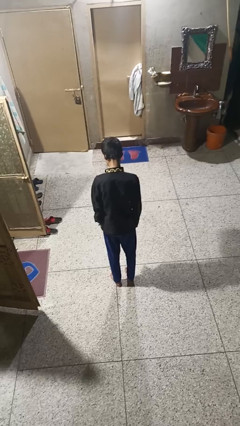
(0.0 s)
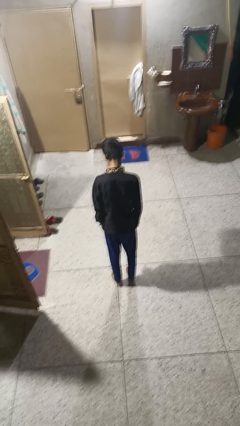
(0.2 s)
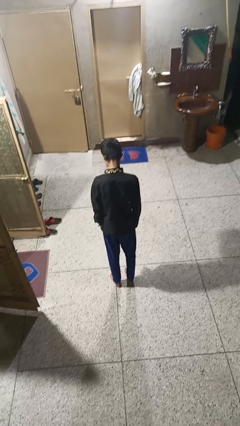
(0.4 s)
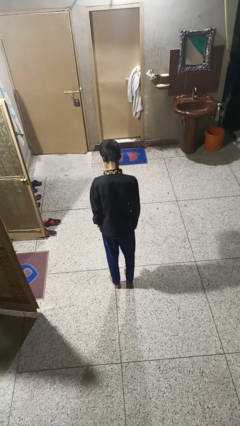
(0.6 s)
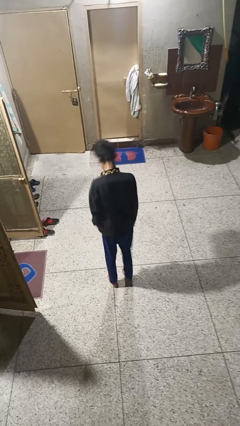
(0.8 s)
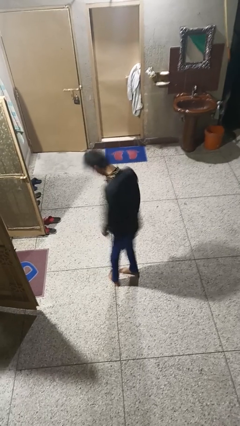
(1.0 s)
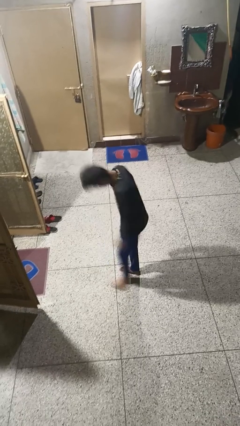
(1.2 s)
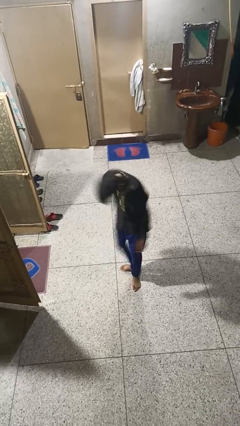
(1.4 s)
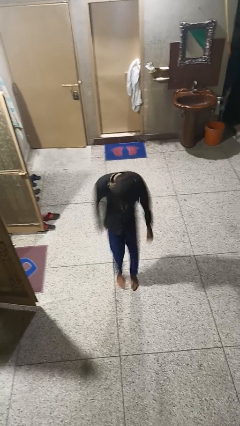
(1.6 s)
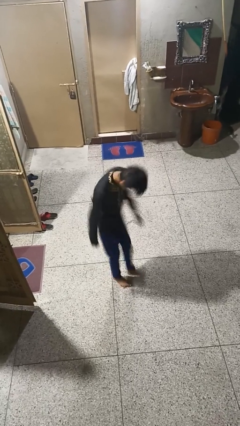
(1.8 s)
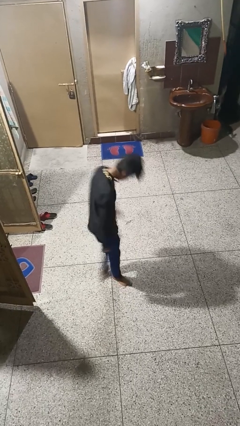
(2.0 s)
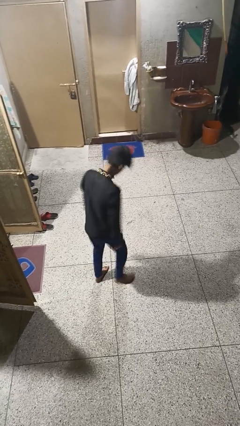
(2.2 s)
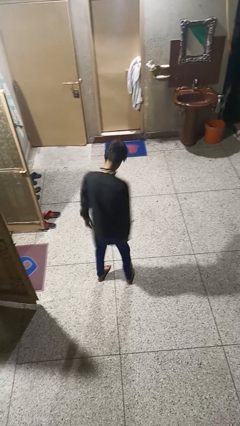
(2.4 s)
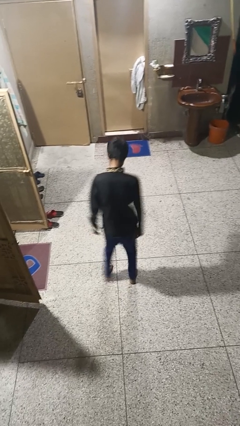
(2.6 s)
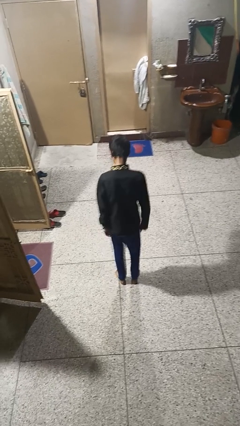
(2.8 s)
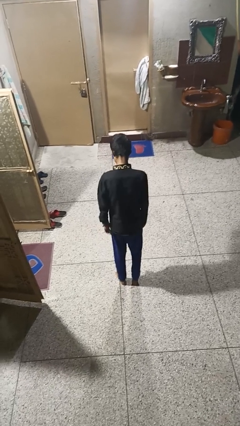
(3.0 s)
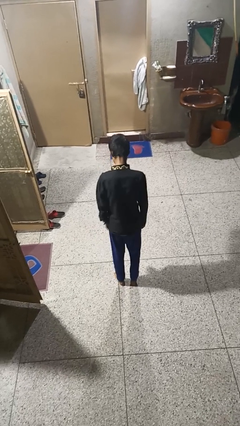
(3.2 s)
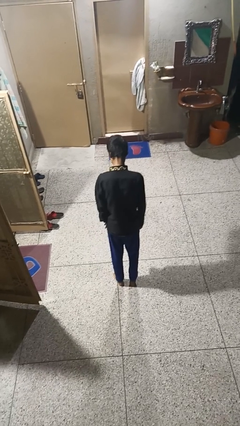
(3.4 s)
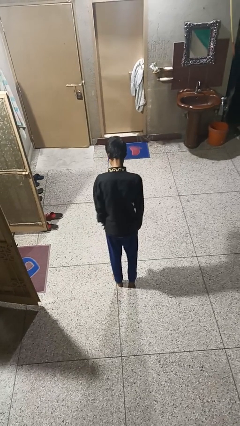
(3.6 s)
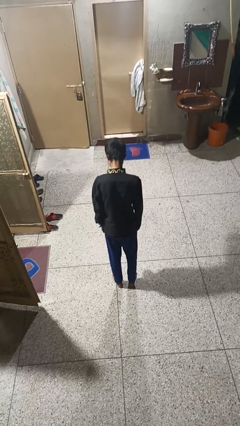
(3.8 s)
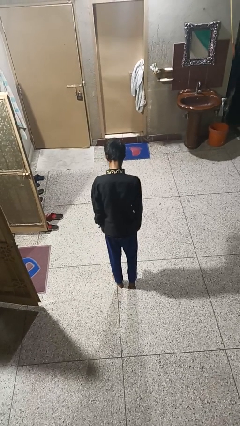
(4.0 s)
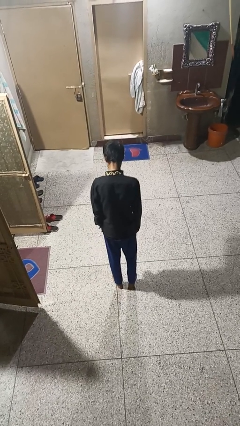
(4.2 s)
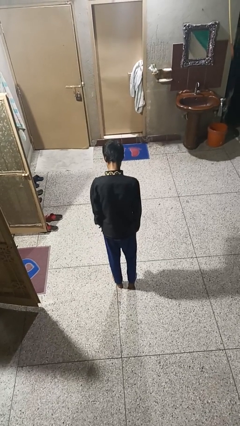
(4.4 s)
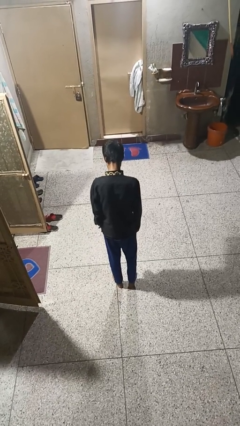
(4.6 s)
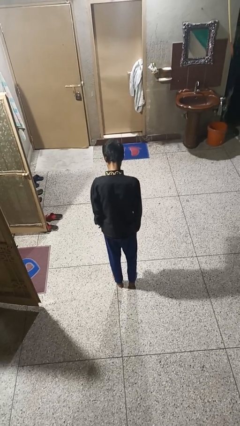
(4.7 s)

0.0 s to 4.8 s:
person twirls

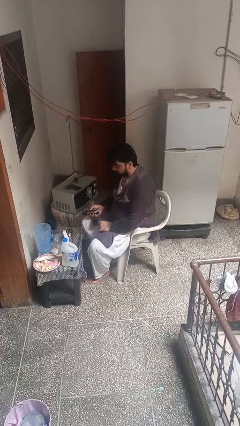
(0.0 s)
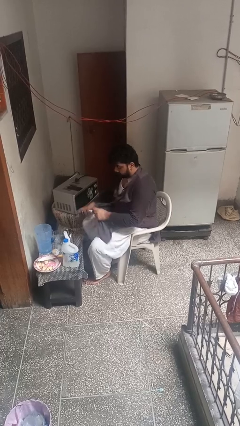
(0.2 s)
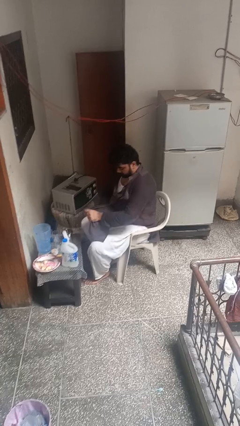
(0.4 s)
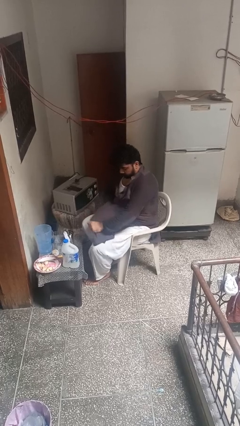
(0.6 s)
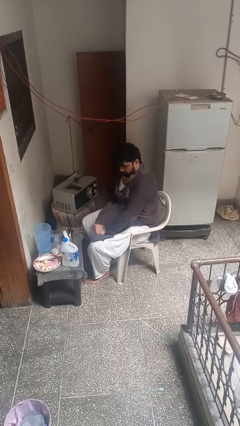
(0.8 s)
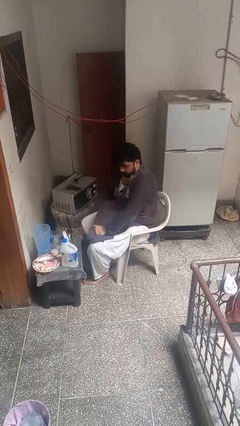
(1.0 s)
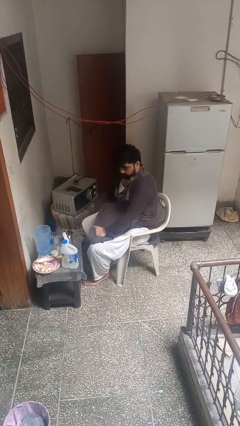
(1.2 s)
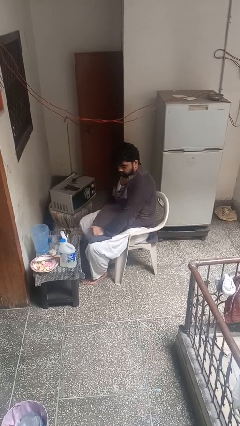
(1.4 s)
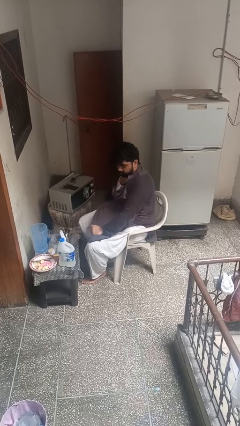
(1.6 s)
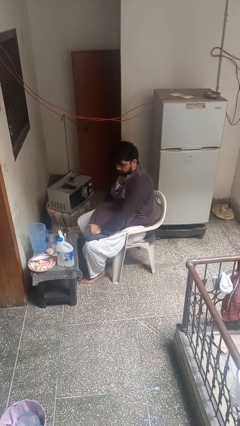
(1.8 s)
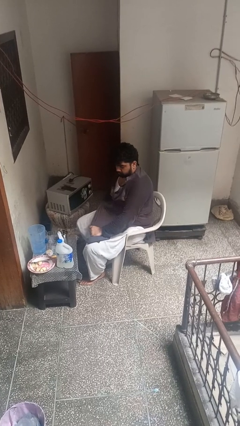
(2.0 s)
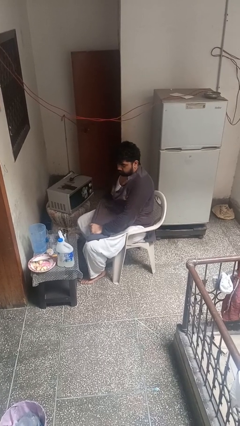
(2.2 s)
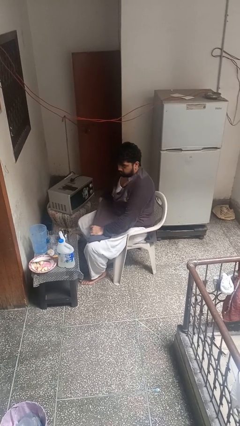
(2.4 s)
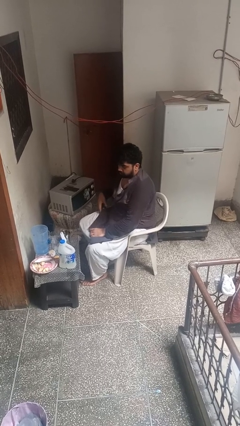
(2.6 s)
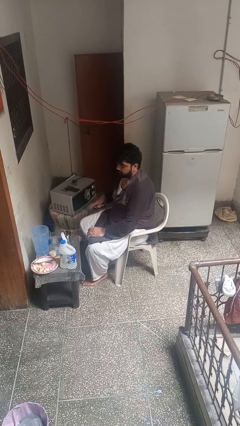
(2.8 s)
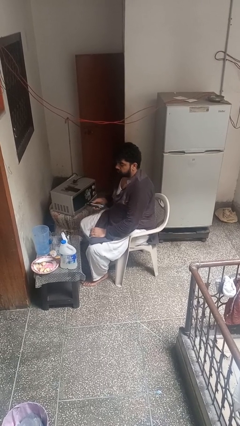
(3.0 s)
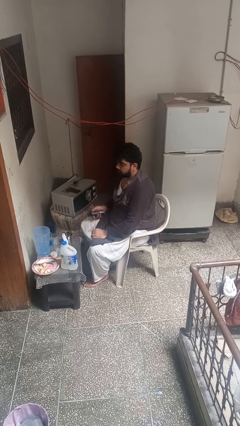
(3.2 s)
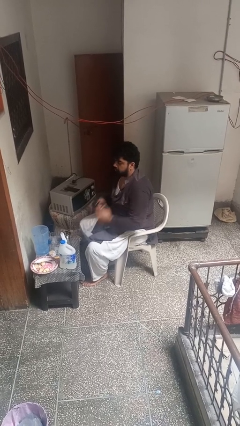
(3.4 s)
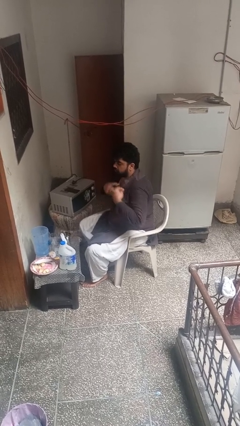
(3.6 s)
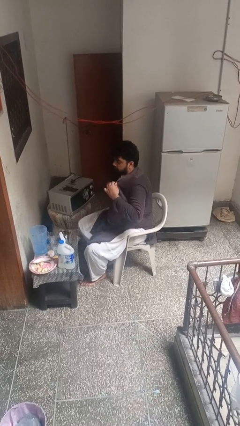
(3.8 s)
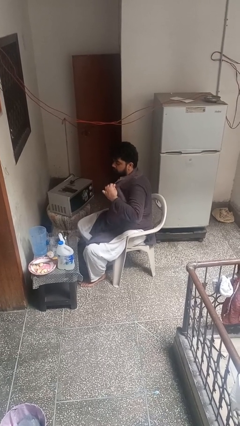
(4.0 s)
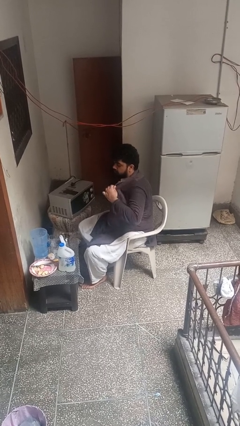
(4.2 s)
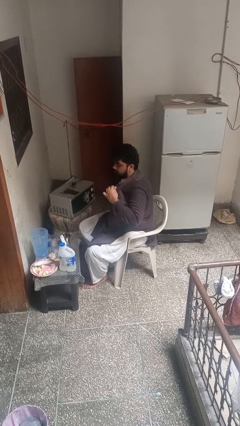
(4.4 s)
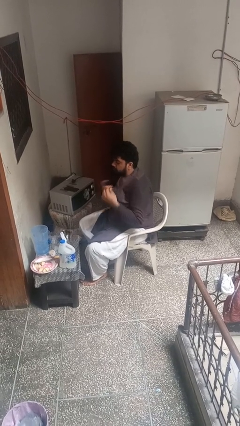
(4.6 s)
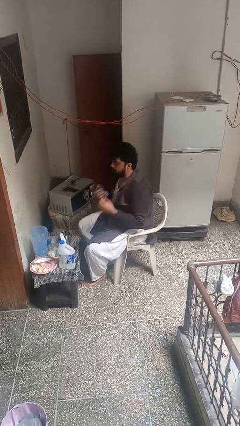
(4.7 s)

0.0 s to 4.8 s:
person applies deodorant

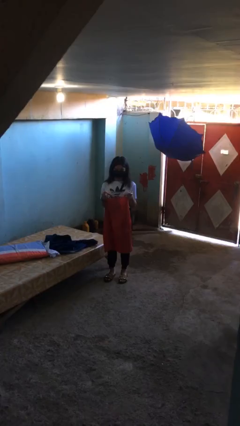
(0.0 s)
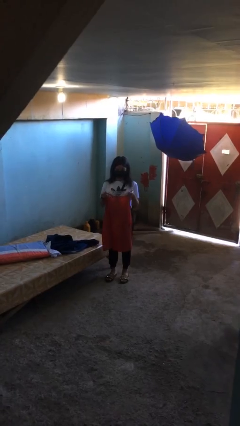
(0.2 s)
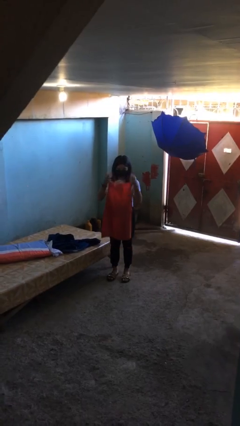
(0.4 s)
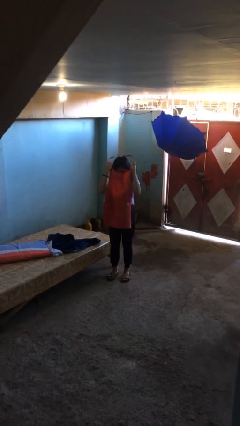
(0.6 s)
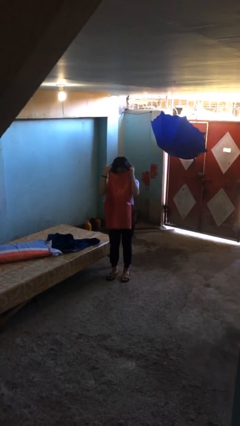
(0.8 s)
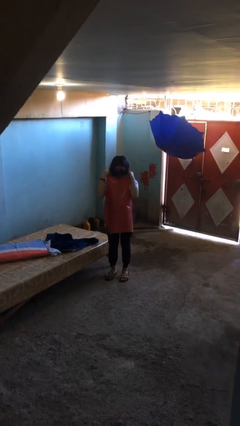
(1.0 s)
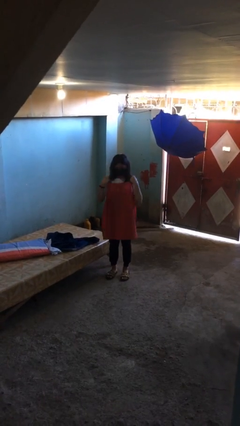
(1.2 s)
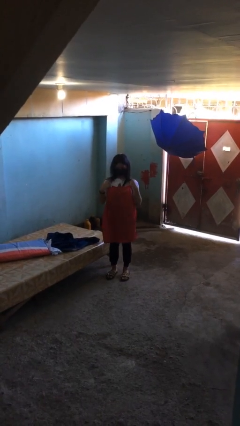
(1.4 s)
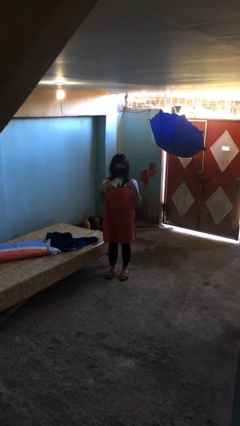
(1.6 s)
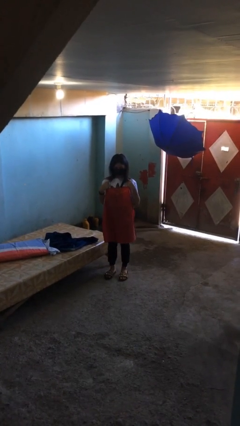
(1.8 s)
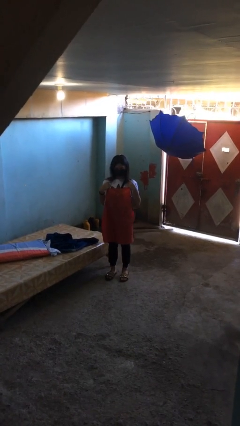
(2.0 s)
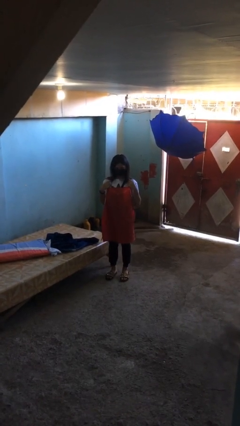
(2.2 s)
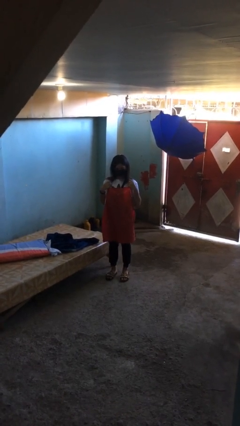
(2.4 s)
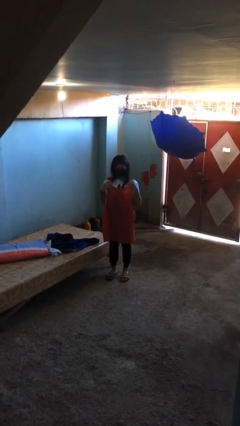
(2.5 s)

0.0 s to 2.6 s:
person puts on apron

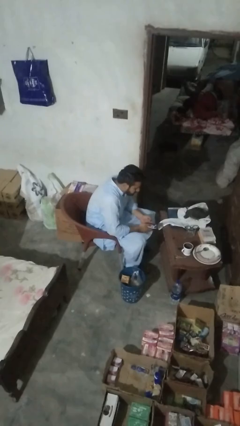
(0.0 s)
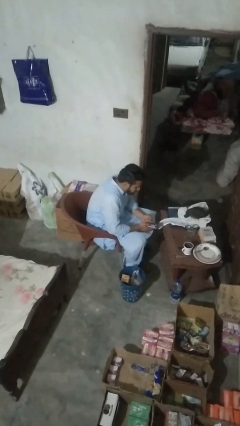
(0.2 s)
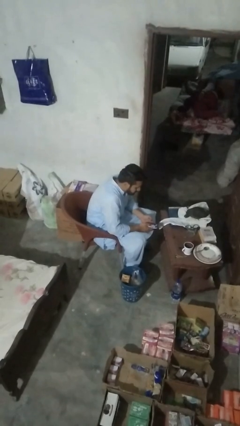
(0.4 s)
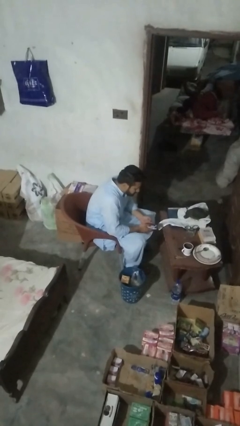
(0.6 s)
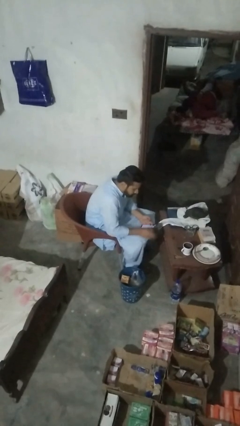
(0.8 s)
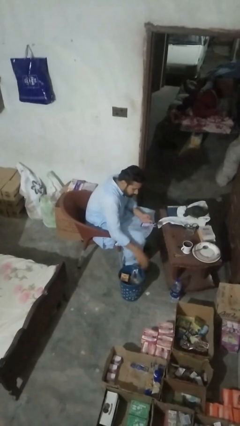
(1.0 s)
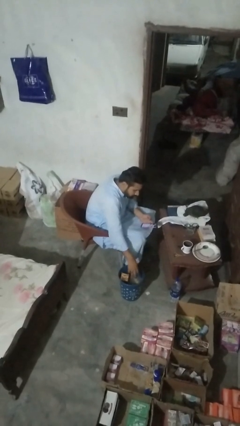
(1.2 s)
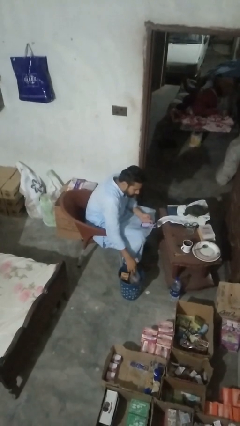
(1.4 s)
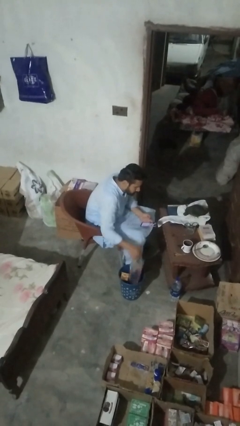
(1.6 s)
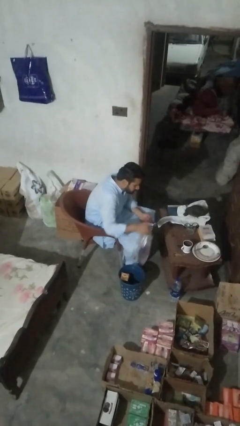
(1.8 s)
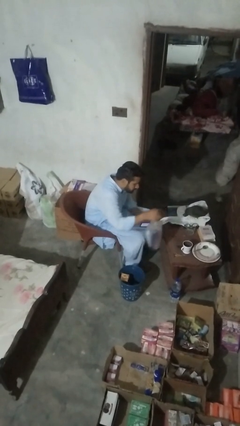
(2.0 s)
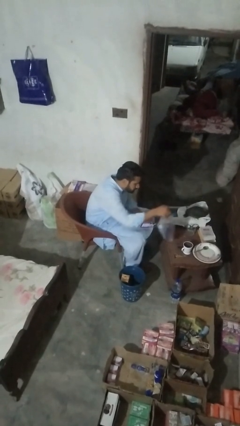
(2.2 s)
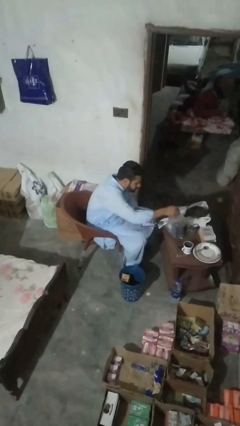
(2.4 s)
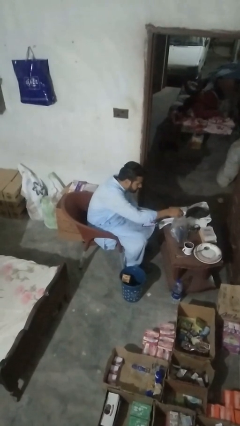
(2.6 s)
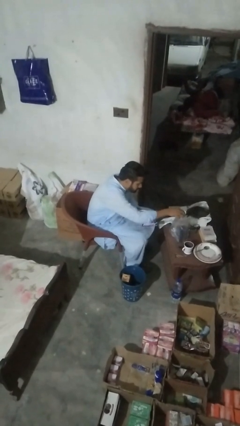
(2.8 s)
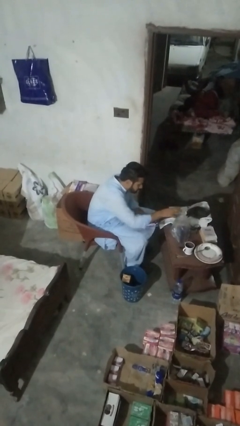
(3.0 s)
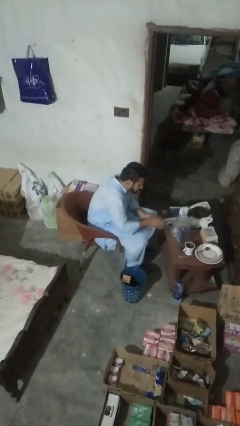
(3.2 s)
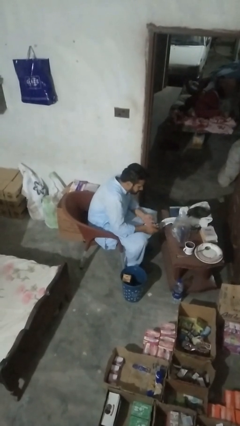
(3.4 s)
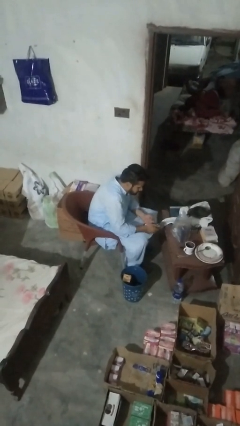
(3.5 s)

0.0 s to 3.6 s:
person inserts trashbag into trashcan

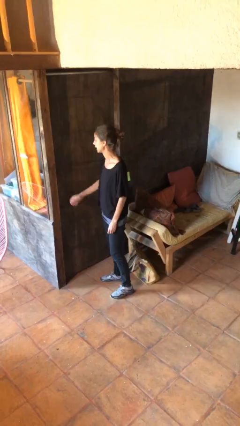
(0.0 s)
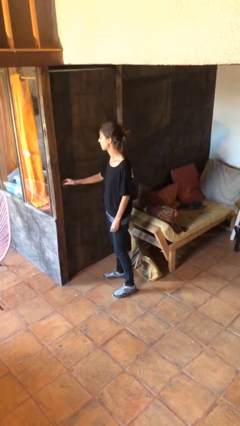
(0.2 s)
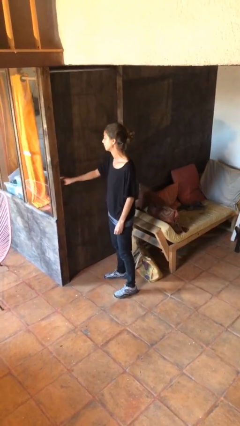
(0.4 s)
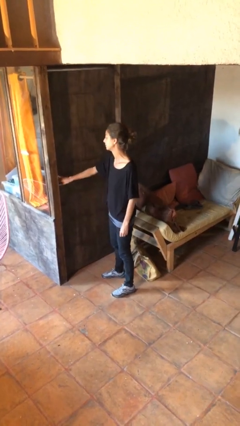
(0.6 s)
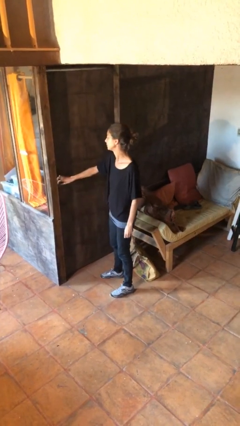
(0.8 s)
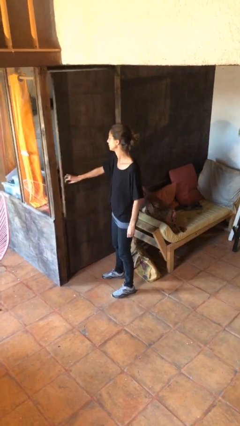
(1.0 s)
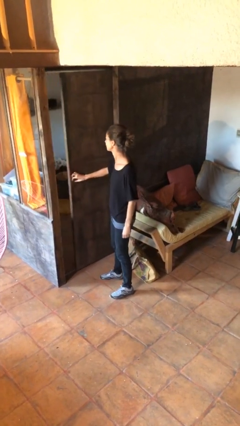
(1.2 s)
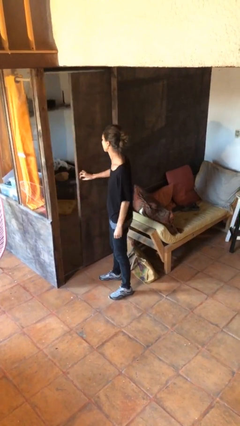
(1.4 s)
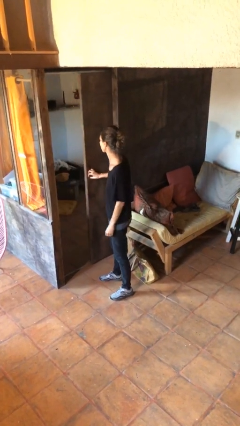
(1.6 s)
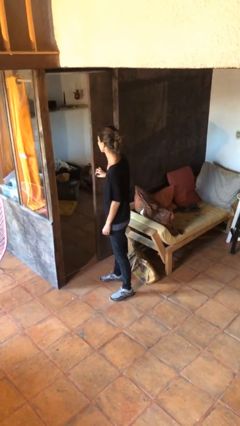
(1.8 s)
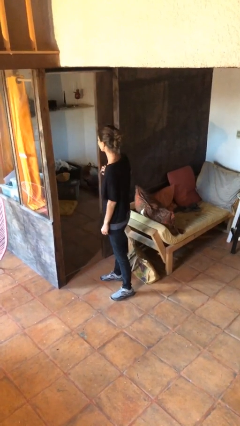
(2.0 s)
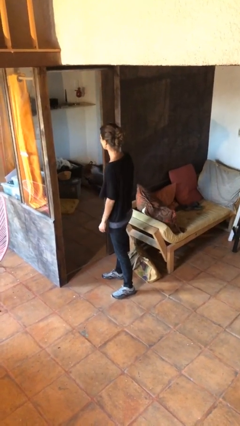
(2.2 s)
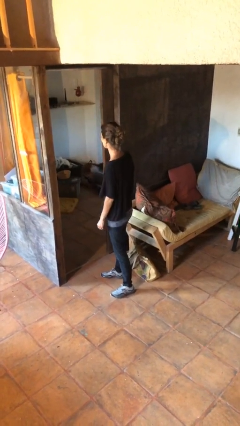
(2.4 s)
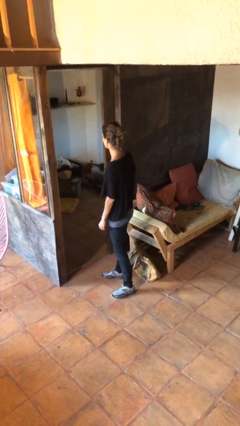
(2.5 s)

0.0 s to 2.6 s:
person opens facility door
